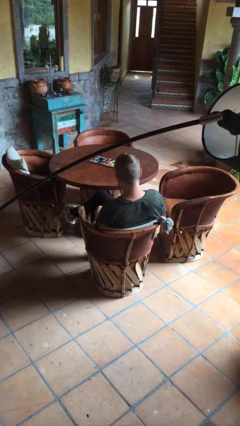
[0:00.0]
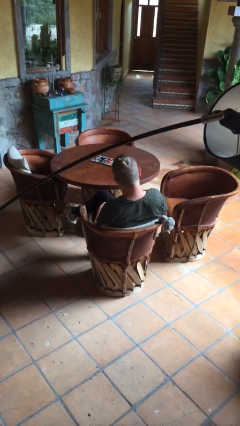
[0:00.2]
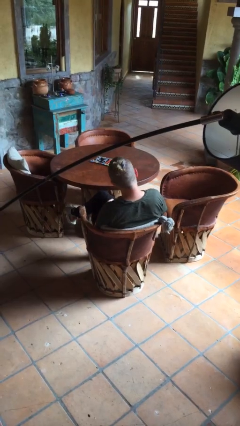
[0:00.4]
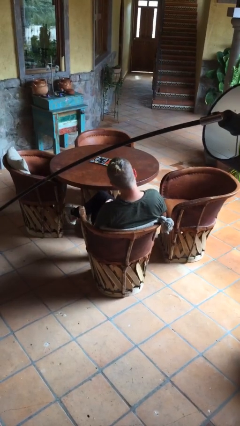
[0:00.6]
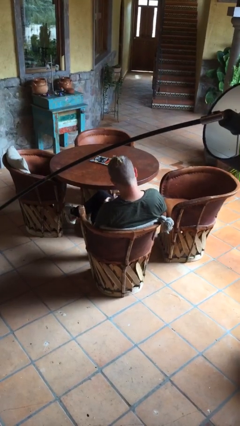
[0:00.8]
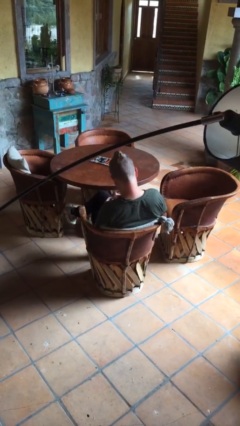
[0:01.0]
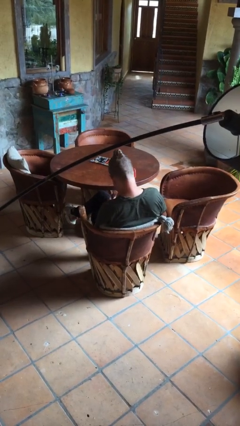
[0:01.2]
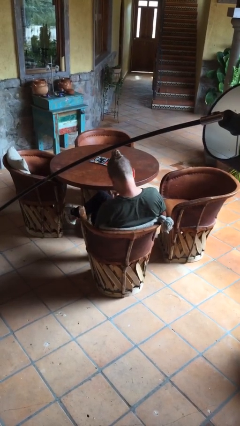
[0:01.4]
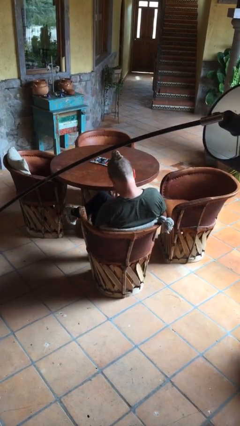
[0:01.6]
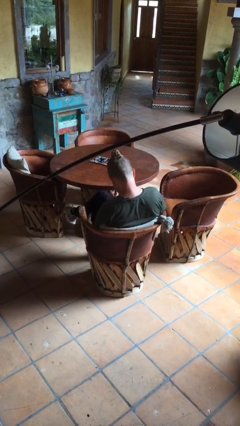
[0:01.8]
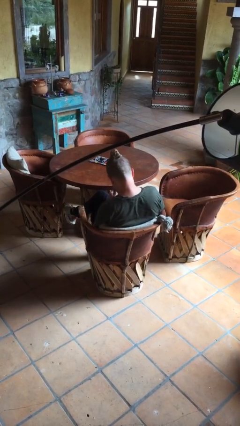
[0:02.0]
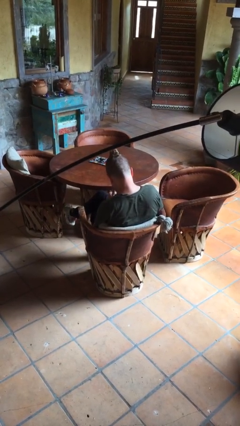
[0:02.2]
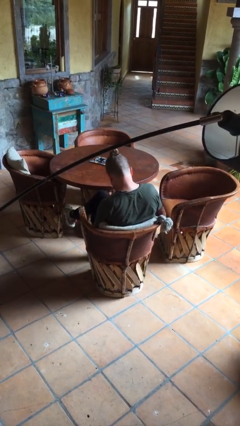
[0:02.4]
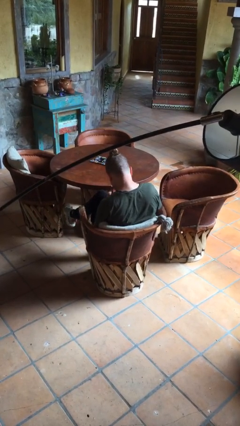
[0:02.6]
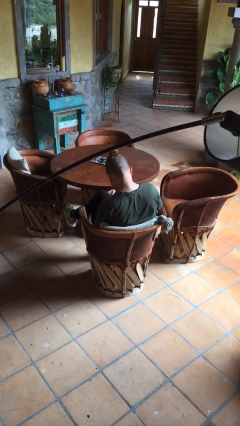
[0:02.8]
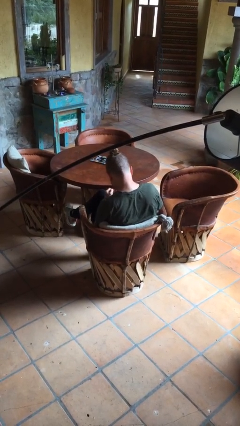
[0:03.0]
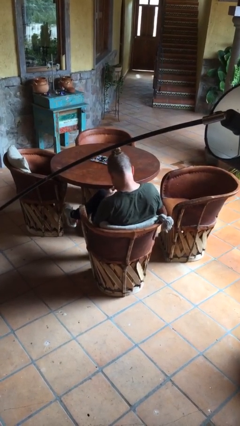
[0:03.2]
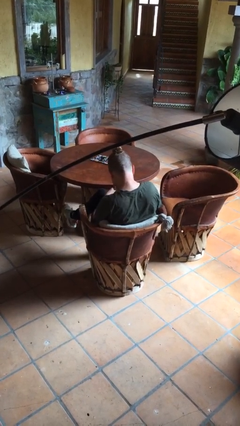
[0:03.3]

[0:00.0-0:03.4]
person clips fingernails

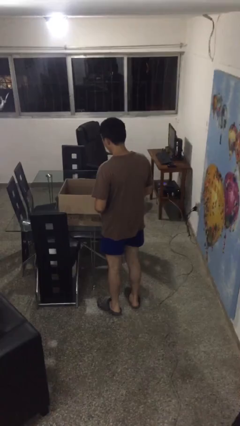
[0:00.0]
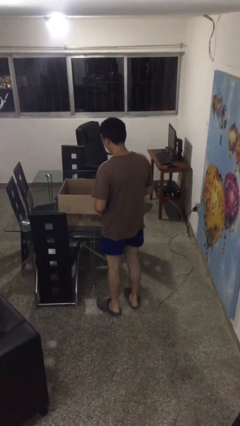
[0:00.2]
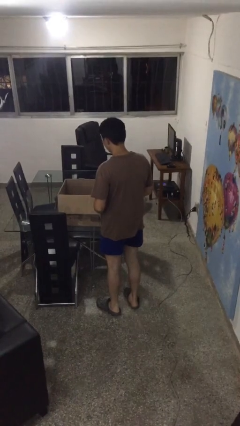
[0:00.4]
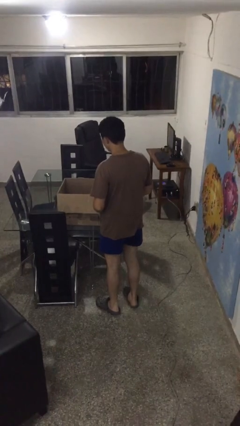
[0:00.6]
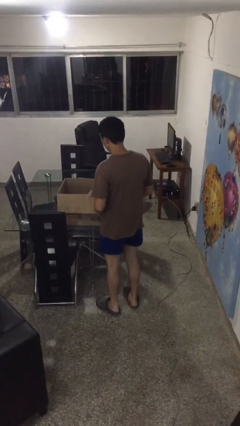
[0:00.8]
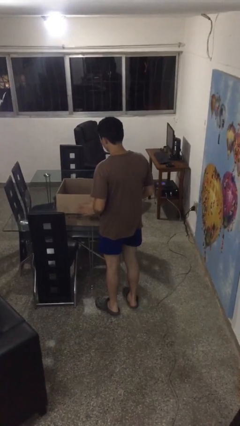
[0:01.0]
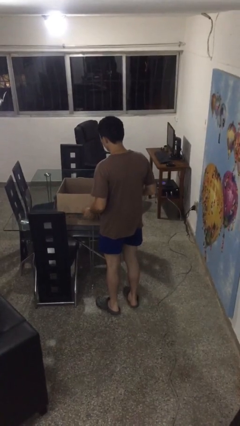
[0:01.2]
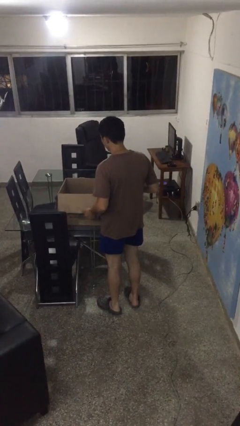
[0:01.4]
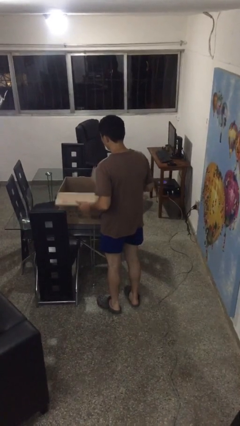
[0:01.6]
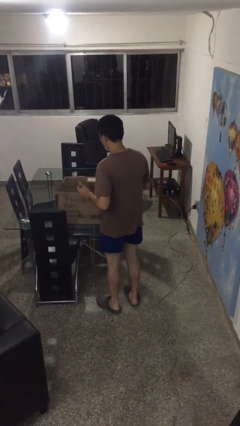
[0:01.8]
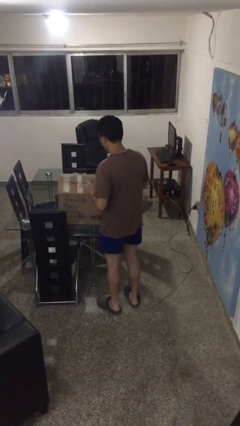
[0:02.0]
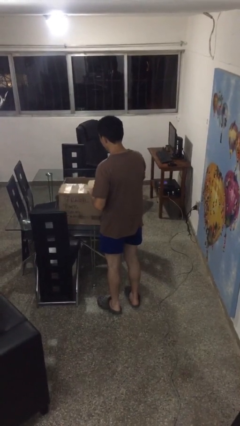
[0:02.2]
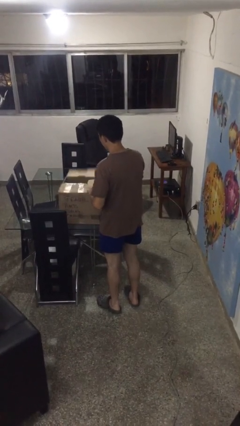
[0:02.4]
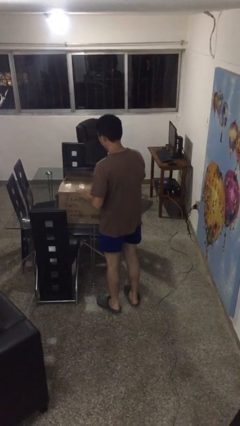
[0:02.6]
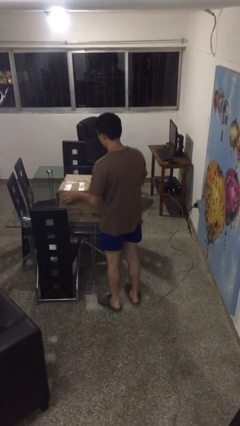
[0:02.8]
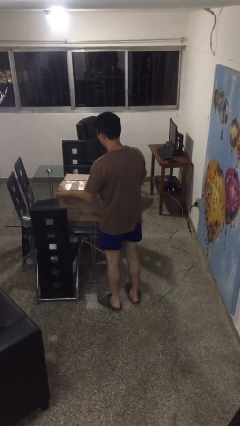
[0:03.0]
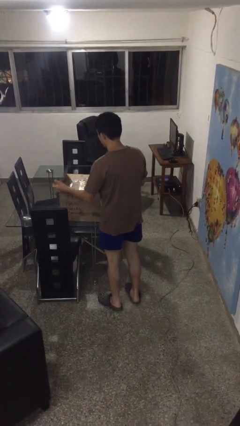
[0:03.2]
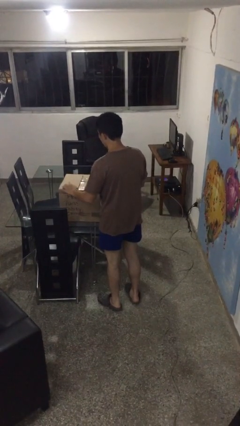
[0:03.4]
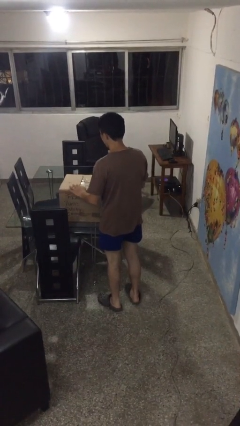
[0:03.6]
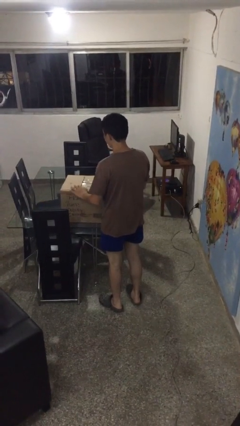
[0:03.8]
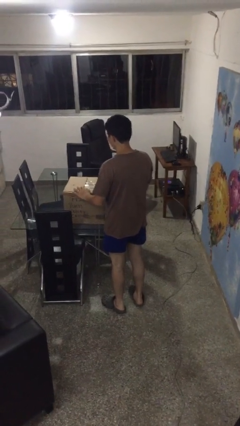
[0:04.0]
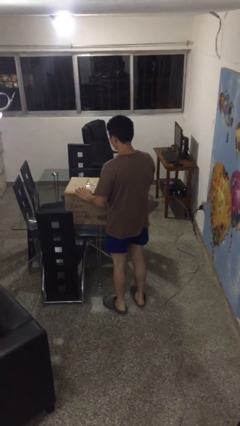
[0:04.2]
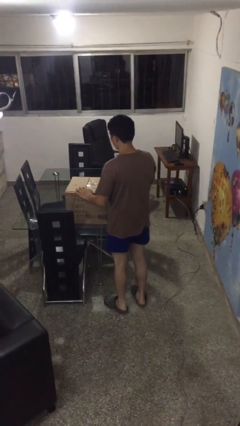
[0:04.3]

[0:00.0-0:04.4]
person closes box

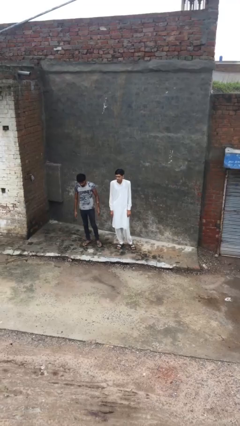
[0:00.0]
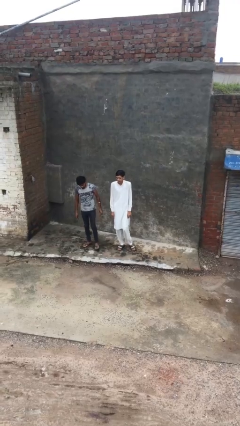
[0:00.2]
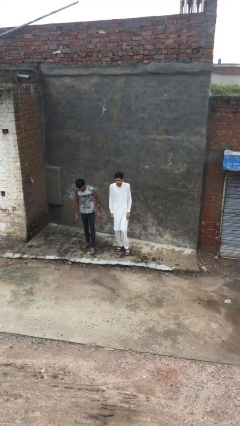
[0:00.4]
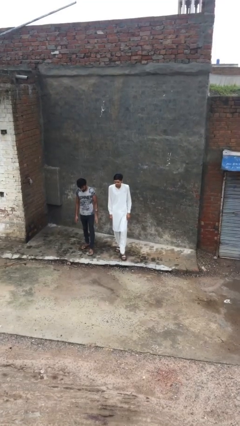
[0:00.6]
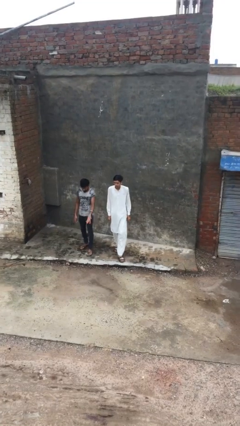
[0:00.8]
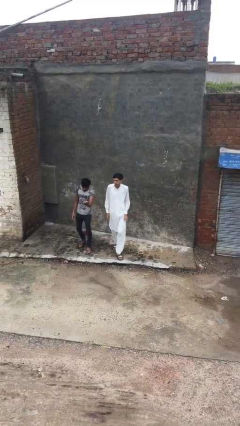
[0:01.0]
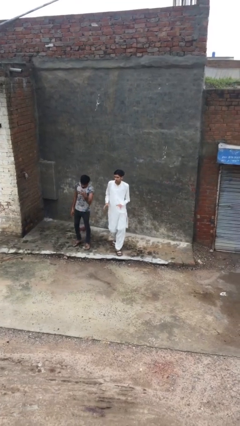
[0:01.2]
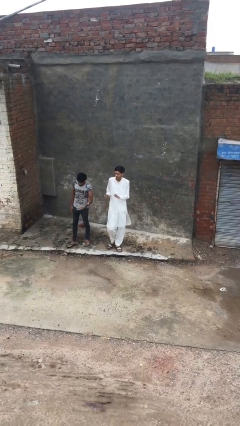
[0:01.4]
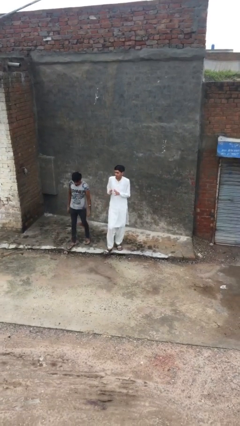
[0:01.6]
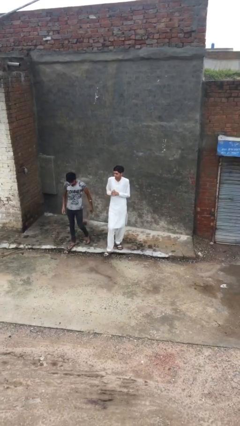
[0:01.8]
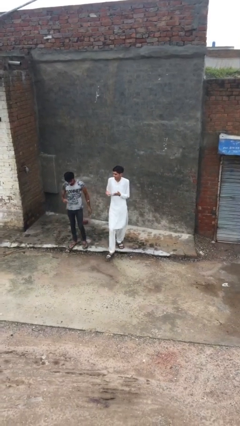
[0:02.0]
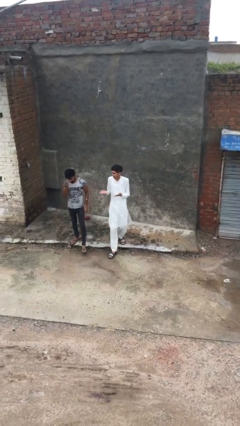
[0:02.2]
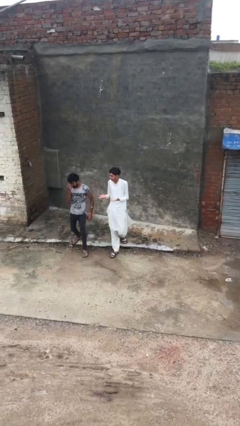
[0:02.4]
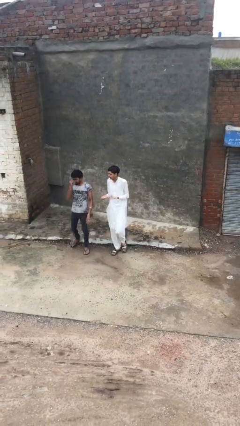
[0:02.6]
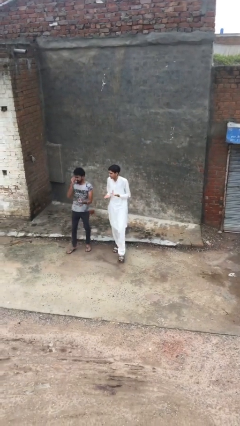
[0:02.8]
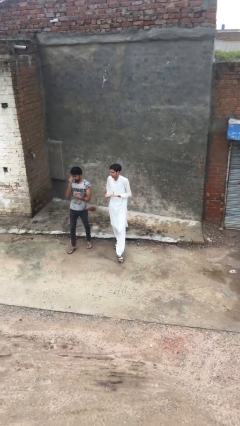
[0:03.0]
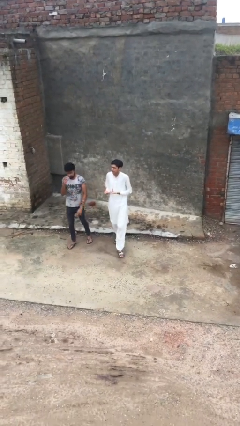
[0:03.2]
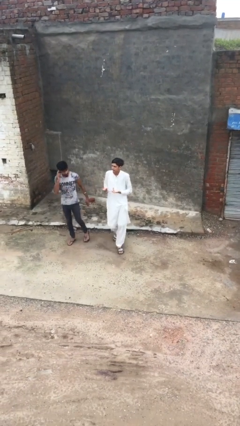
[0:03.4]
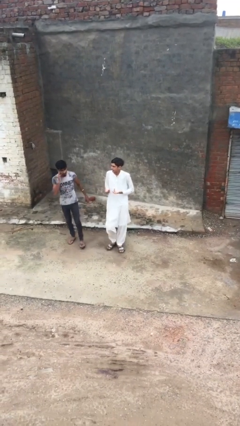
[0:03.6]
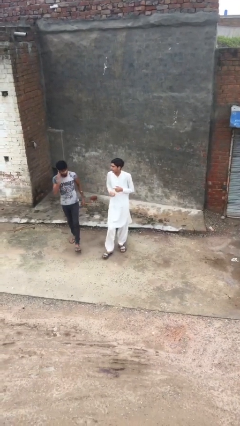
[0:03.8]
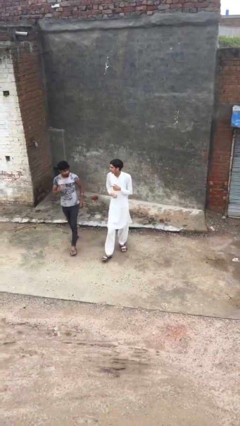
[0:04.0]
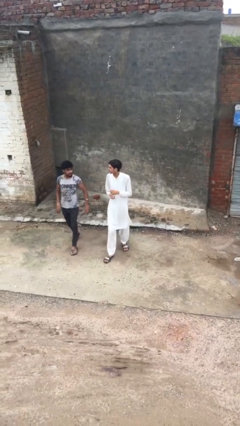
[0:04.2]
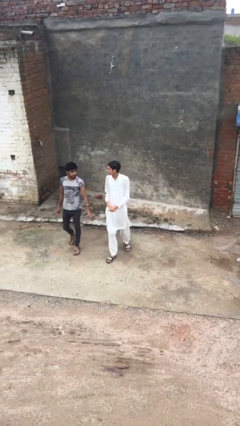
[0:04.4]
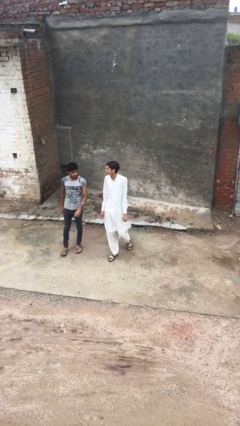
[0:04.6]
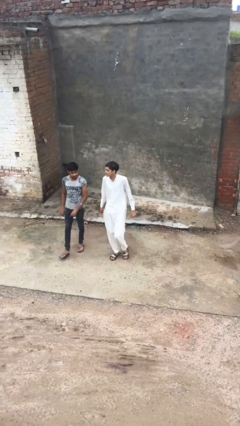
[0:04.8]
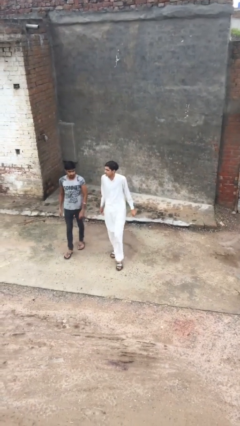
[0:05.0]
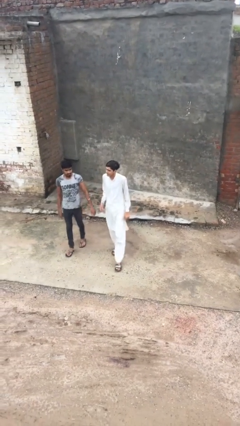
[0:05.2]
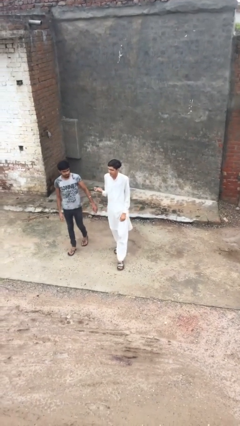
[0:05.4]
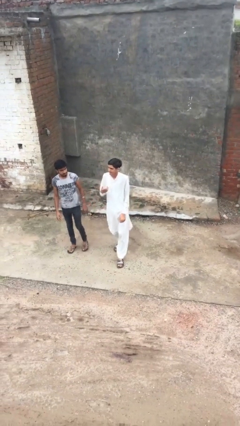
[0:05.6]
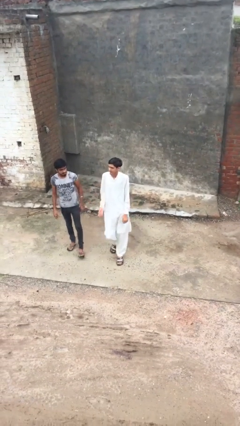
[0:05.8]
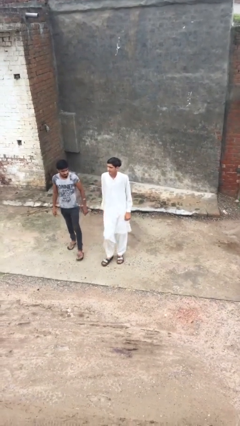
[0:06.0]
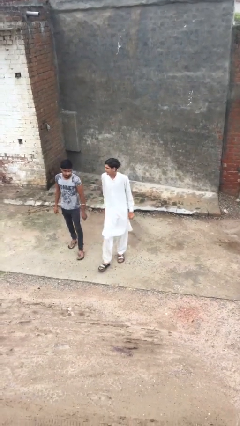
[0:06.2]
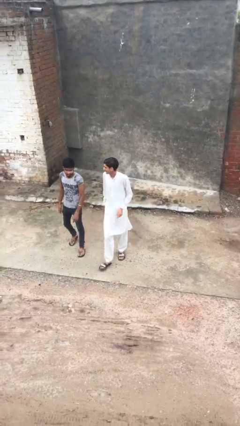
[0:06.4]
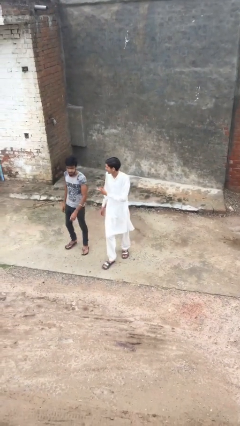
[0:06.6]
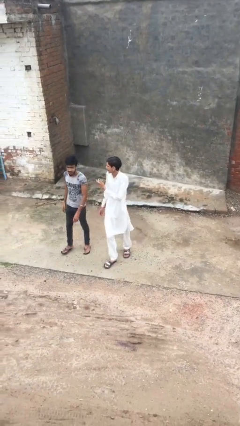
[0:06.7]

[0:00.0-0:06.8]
person talks to person

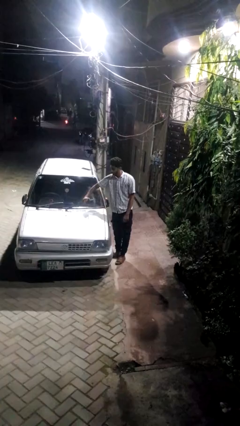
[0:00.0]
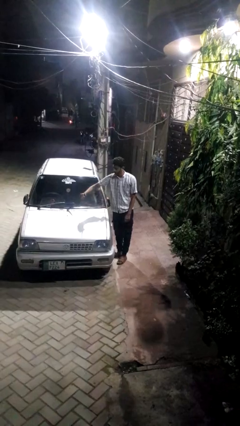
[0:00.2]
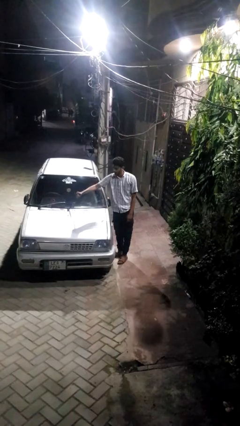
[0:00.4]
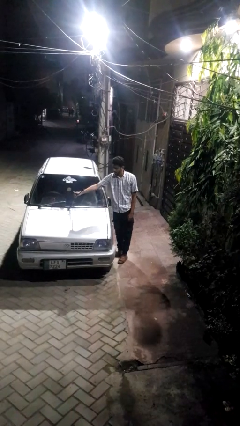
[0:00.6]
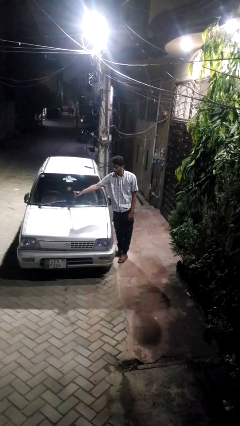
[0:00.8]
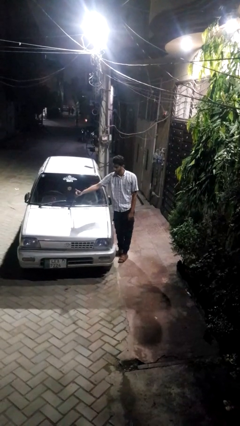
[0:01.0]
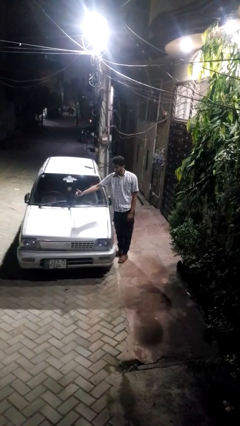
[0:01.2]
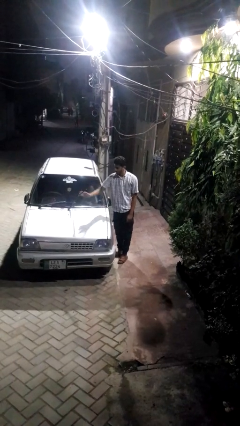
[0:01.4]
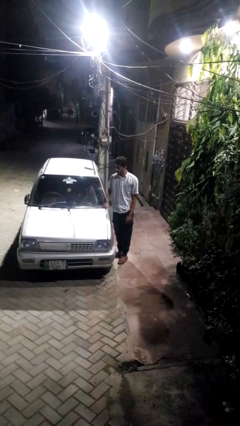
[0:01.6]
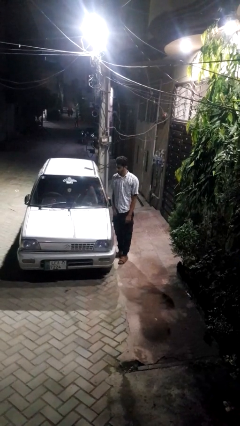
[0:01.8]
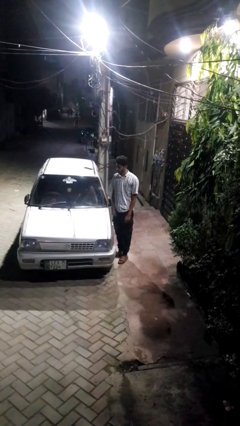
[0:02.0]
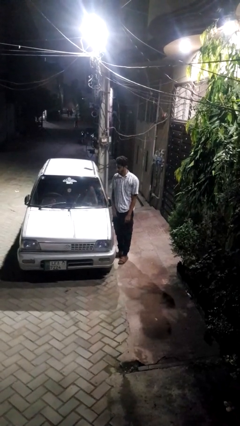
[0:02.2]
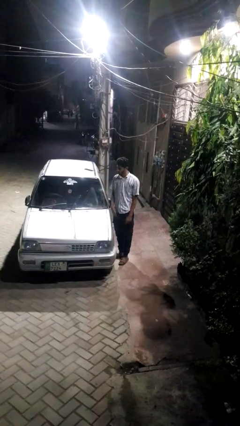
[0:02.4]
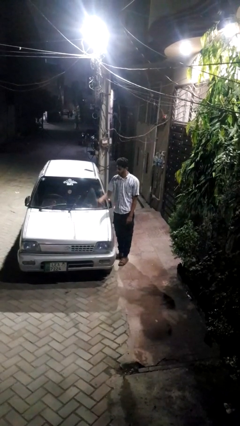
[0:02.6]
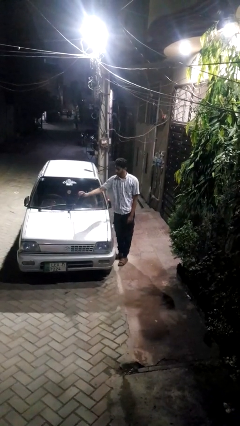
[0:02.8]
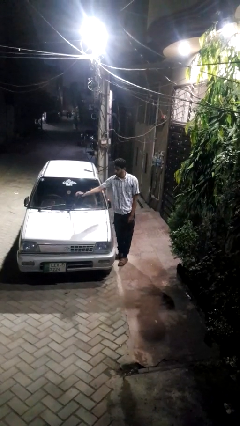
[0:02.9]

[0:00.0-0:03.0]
person flips up car wipers

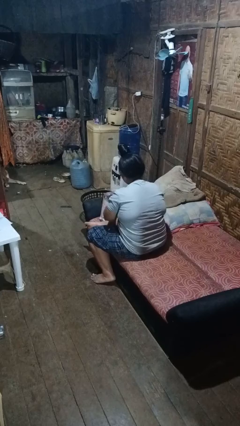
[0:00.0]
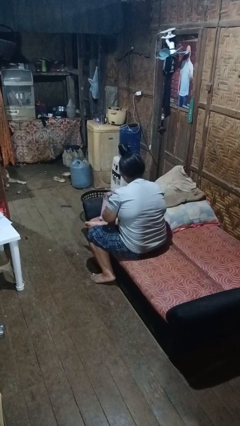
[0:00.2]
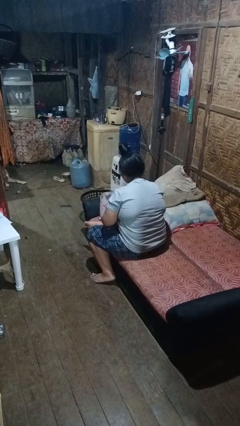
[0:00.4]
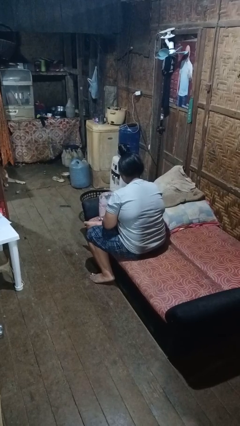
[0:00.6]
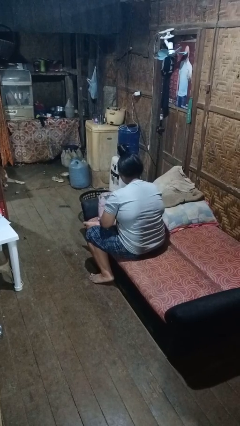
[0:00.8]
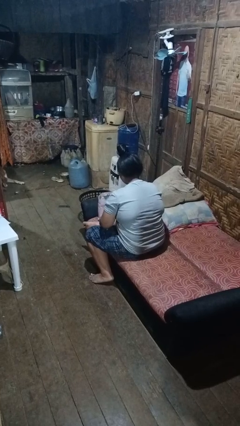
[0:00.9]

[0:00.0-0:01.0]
person puts object into bag
